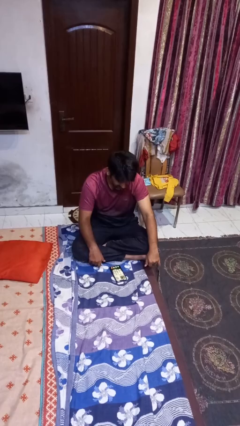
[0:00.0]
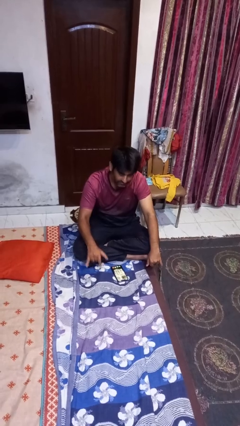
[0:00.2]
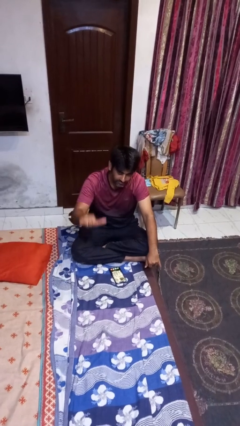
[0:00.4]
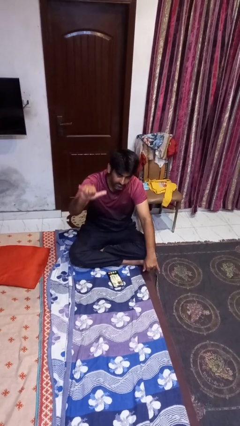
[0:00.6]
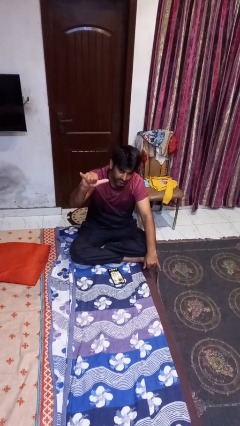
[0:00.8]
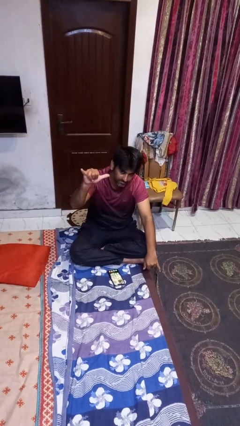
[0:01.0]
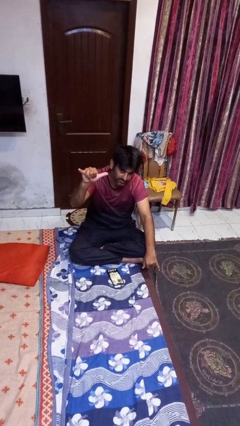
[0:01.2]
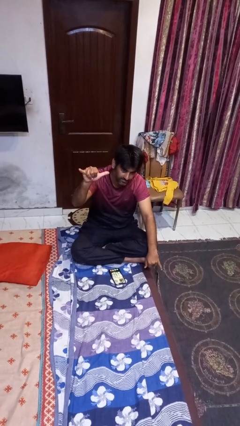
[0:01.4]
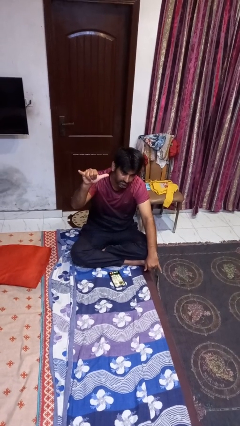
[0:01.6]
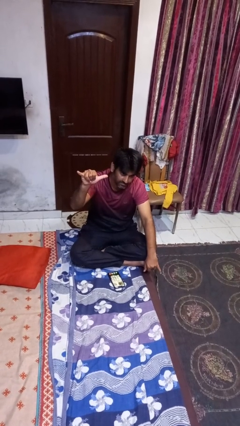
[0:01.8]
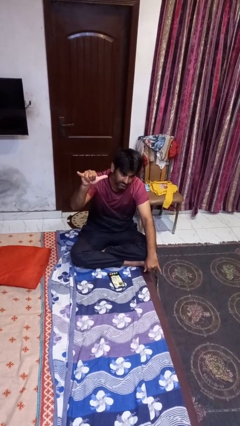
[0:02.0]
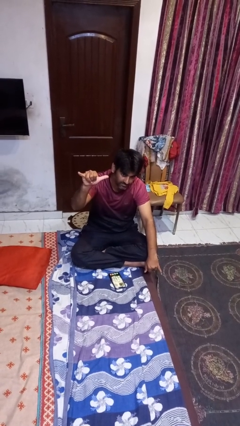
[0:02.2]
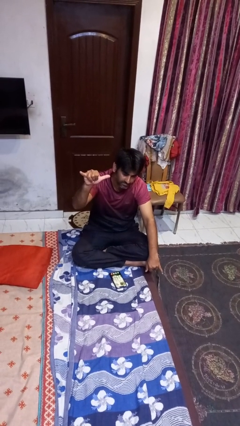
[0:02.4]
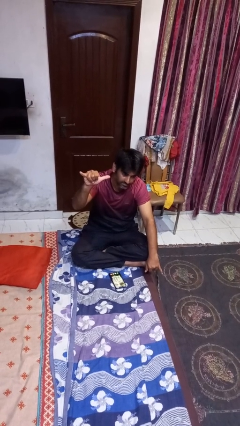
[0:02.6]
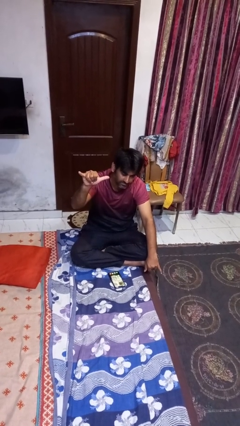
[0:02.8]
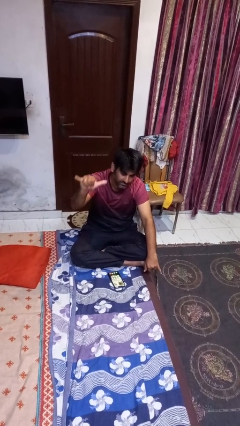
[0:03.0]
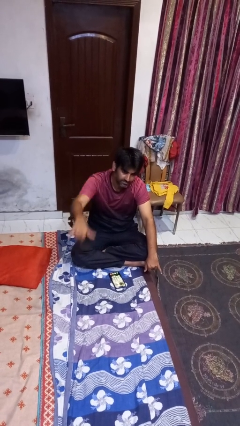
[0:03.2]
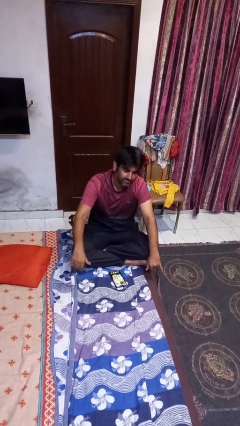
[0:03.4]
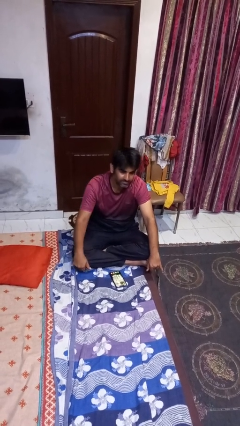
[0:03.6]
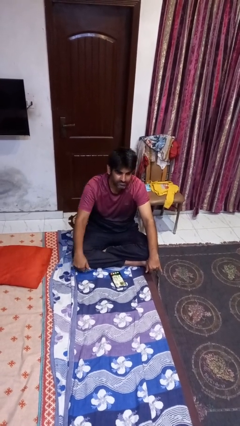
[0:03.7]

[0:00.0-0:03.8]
person gestures hang loose

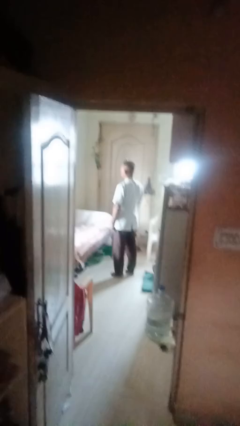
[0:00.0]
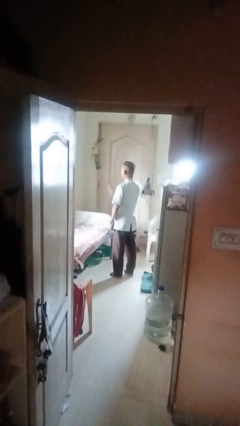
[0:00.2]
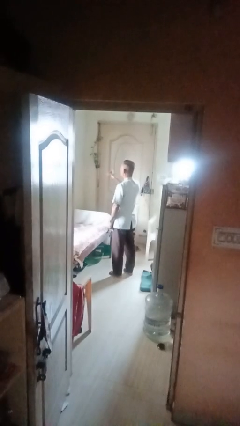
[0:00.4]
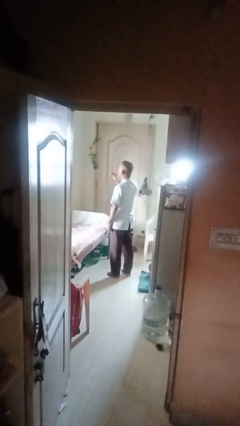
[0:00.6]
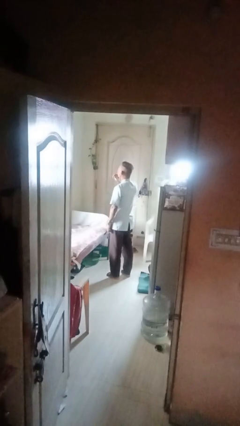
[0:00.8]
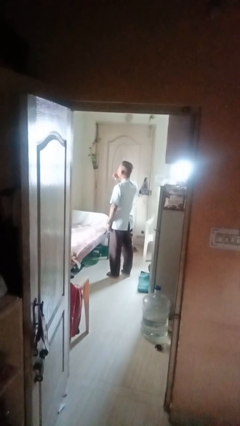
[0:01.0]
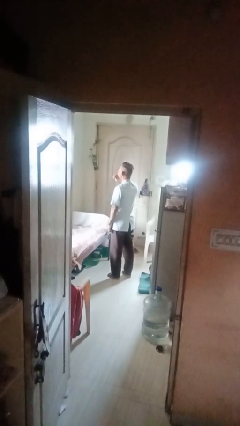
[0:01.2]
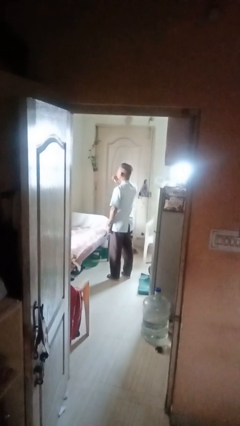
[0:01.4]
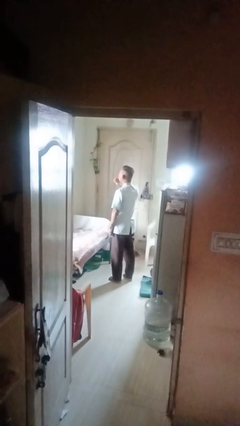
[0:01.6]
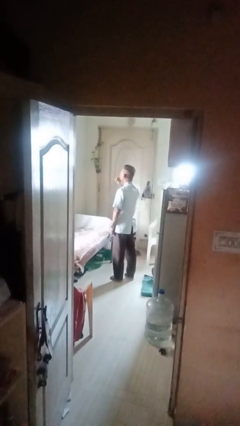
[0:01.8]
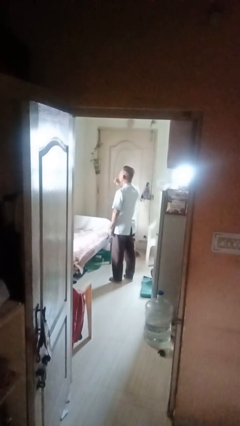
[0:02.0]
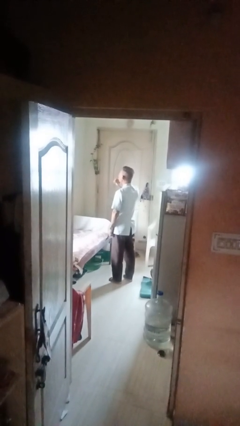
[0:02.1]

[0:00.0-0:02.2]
person gestures be quiet

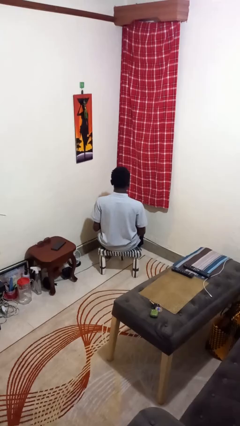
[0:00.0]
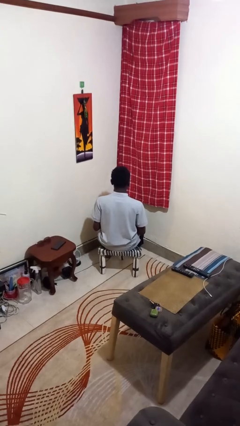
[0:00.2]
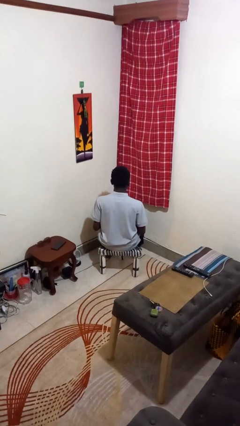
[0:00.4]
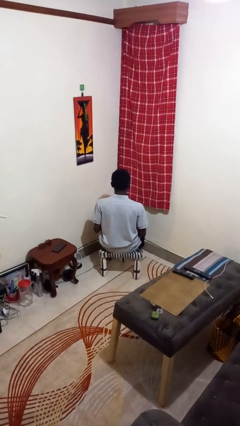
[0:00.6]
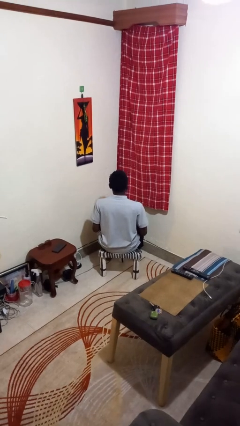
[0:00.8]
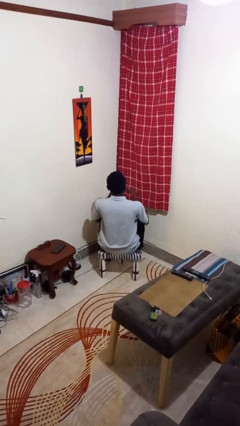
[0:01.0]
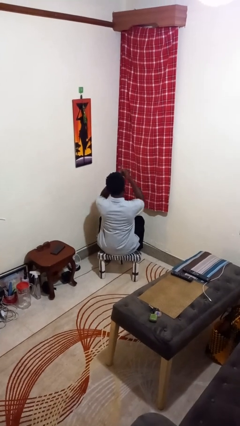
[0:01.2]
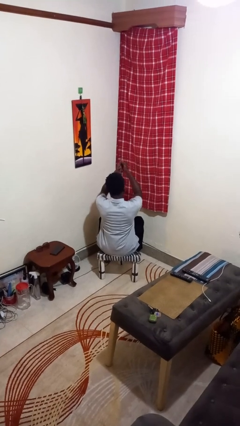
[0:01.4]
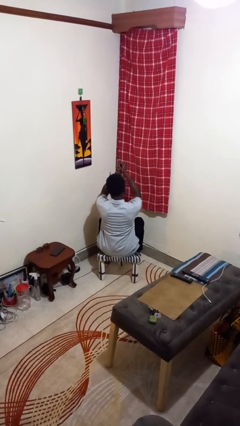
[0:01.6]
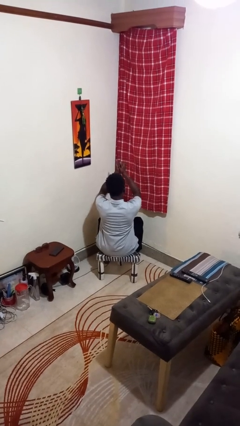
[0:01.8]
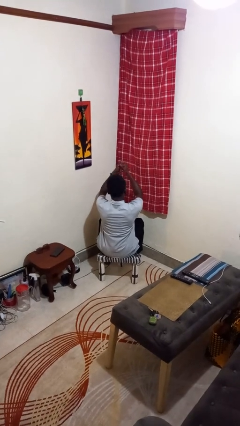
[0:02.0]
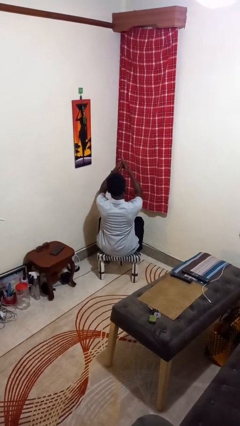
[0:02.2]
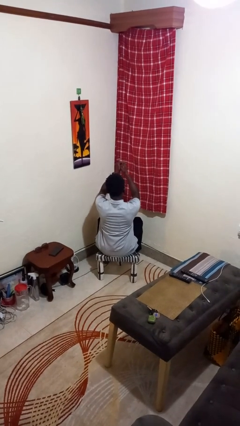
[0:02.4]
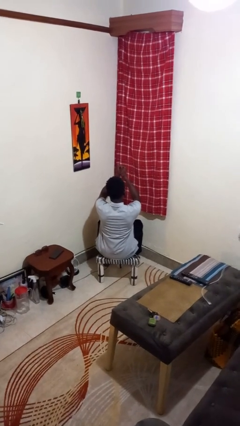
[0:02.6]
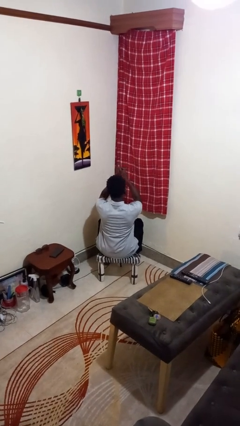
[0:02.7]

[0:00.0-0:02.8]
person cracks knuckles

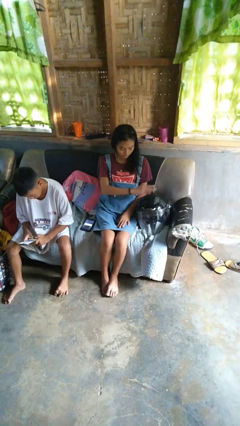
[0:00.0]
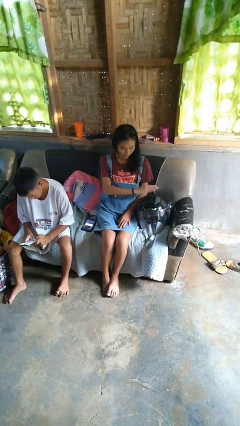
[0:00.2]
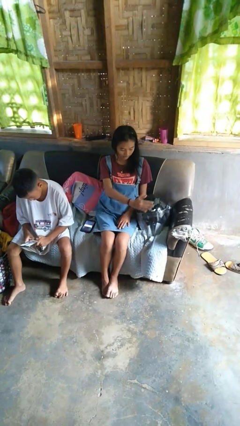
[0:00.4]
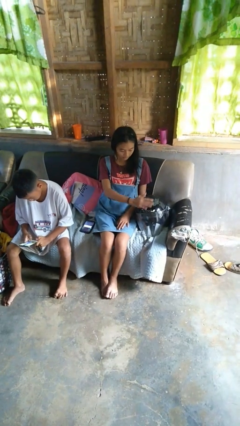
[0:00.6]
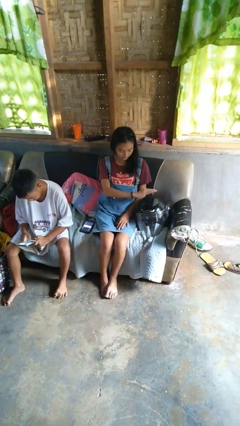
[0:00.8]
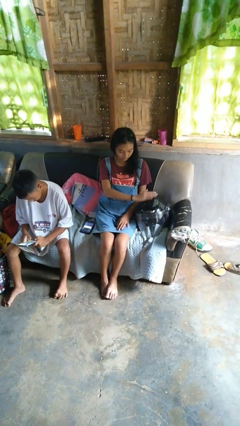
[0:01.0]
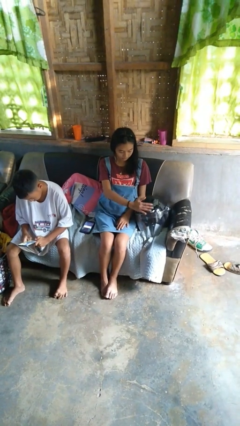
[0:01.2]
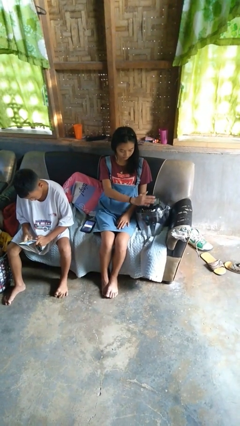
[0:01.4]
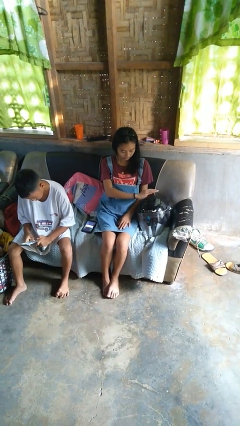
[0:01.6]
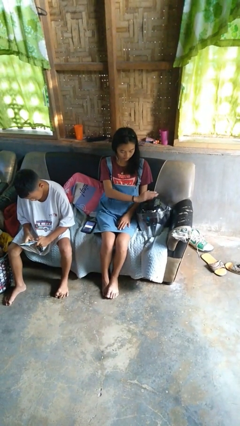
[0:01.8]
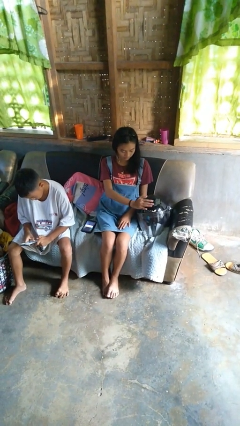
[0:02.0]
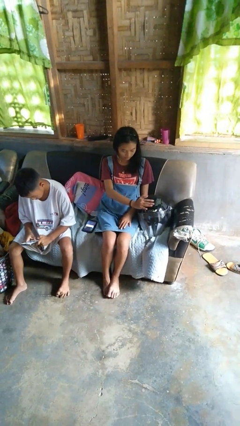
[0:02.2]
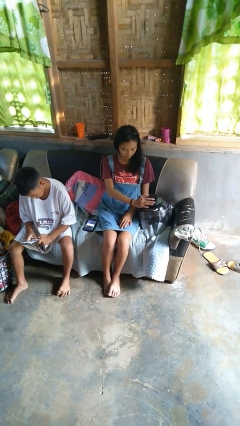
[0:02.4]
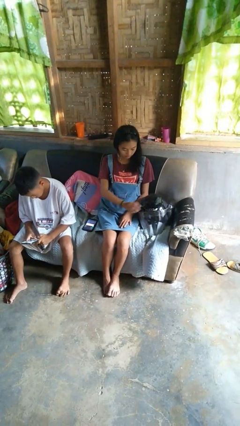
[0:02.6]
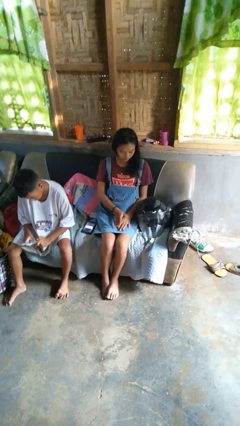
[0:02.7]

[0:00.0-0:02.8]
person waves hand over object

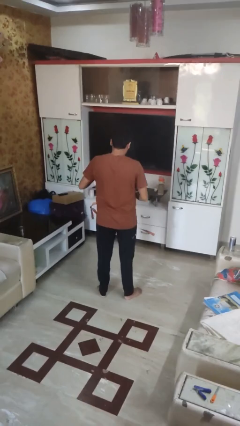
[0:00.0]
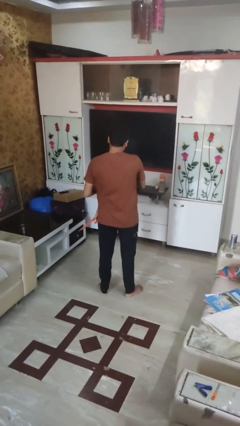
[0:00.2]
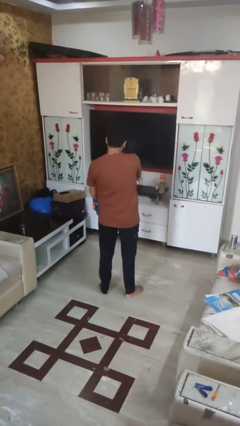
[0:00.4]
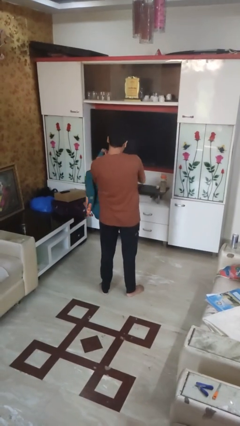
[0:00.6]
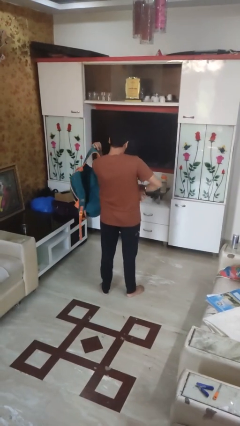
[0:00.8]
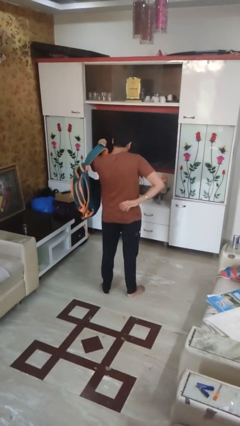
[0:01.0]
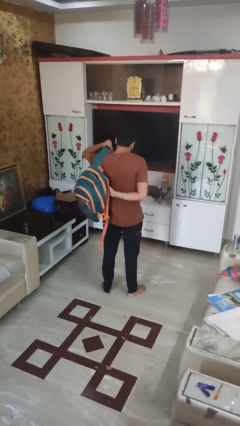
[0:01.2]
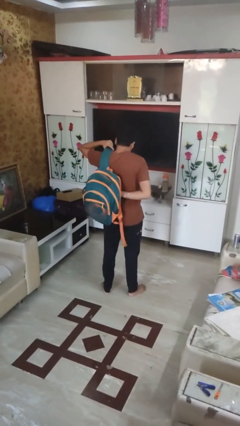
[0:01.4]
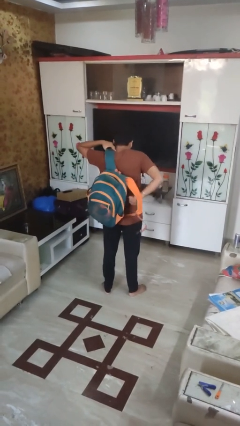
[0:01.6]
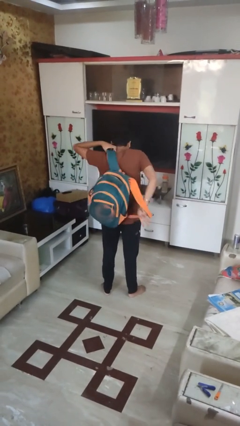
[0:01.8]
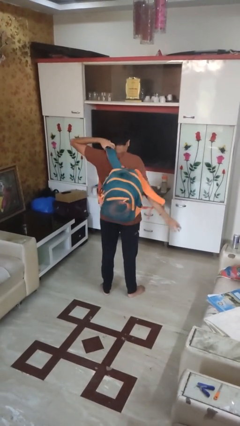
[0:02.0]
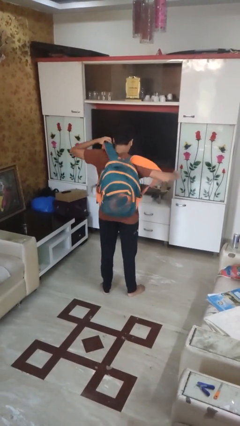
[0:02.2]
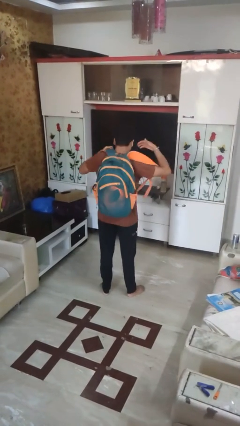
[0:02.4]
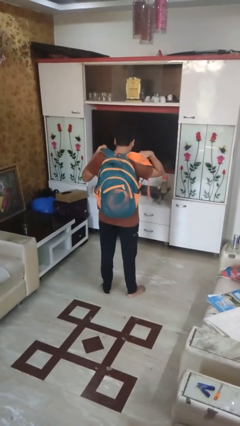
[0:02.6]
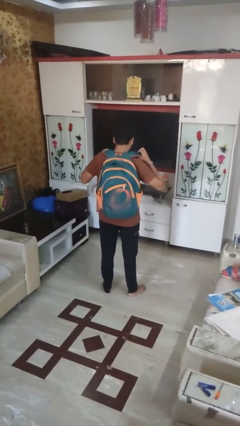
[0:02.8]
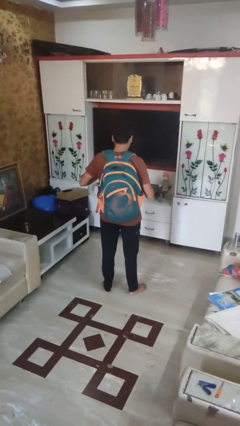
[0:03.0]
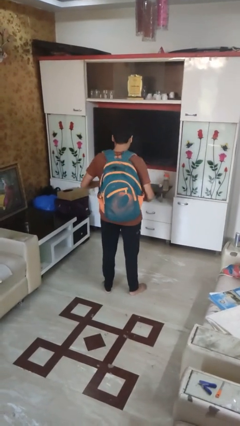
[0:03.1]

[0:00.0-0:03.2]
person puts on backpack

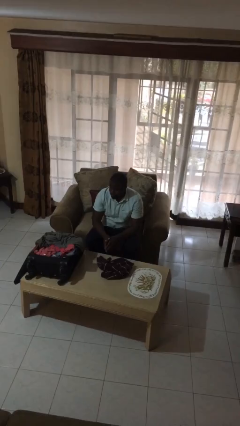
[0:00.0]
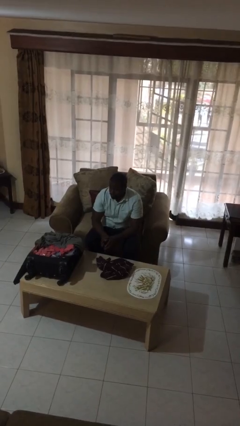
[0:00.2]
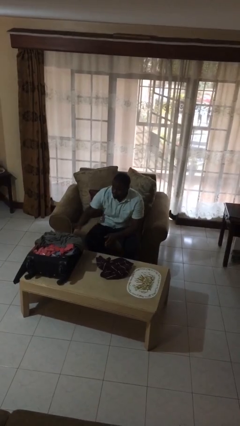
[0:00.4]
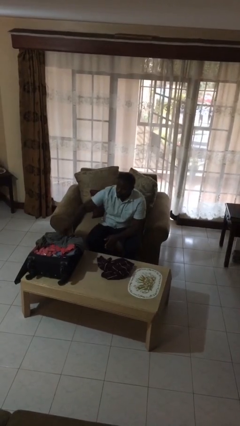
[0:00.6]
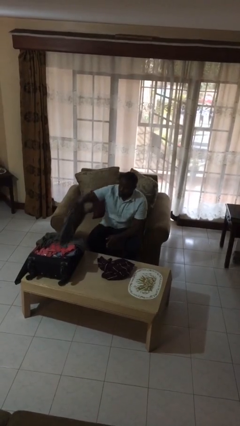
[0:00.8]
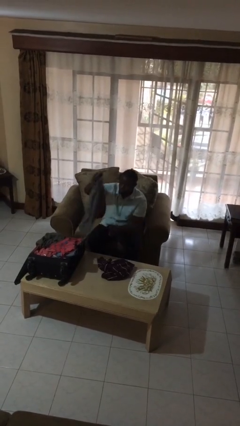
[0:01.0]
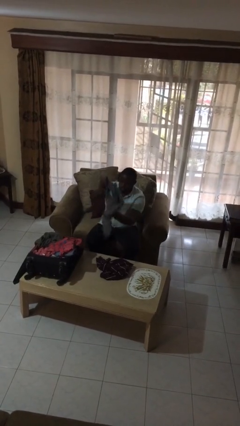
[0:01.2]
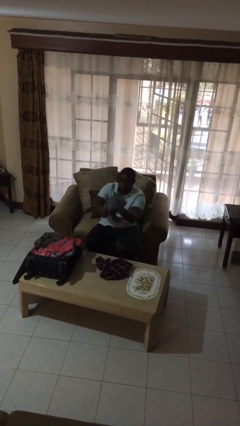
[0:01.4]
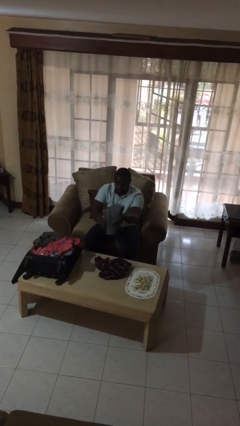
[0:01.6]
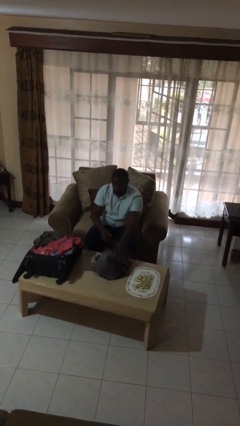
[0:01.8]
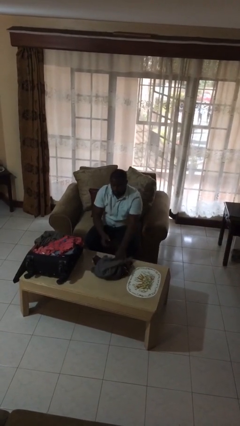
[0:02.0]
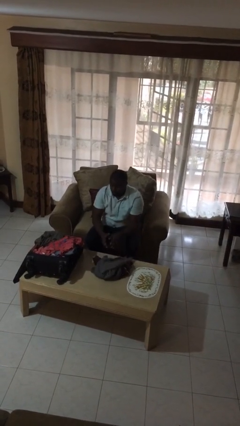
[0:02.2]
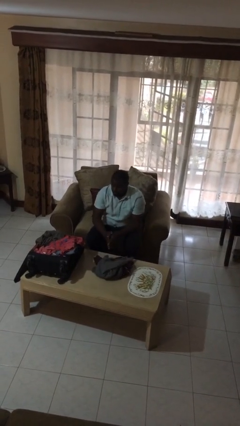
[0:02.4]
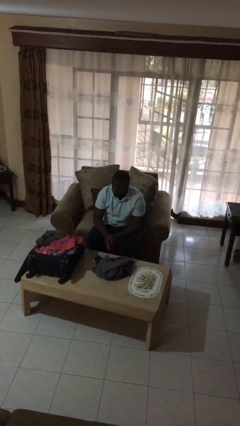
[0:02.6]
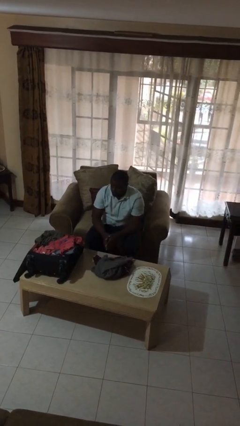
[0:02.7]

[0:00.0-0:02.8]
person unloads clothes from suitcase
